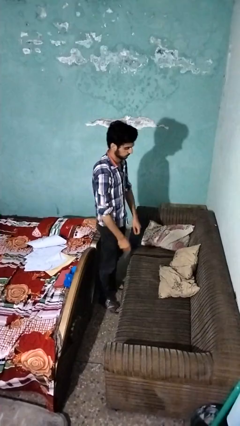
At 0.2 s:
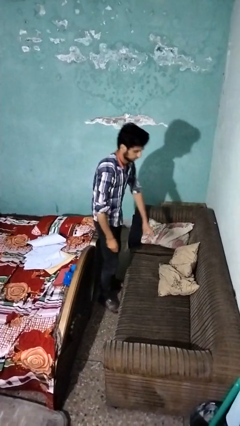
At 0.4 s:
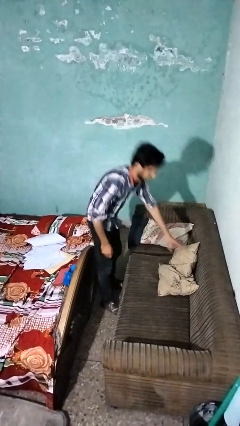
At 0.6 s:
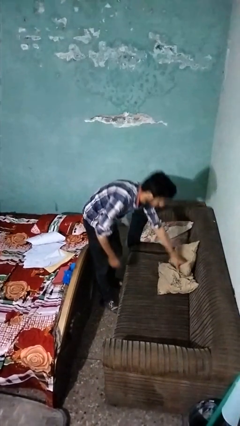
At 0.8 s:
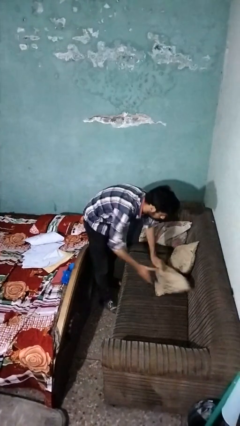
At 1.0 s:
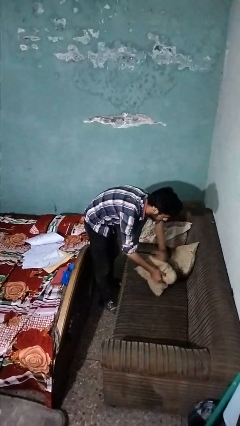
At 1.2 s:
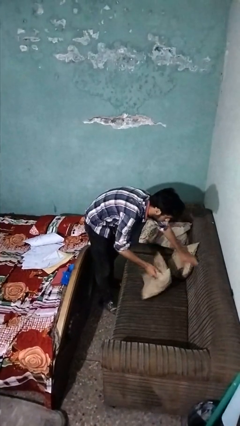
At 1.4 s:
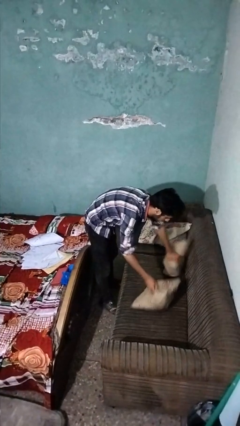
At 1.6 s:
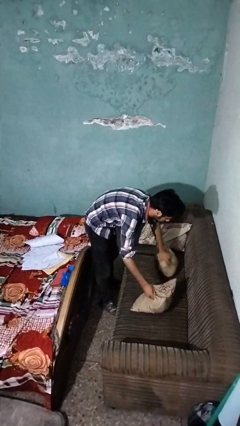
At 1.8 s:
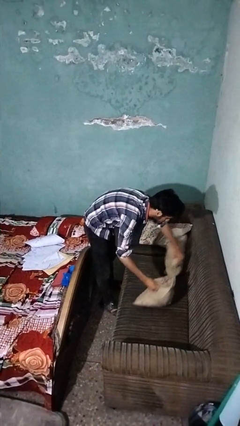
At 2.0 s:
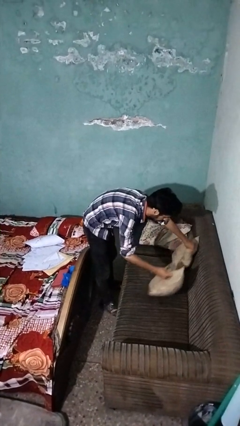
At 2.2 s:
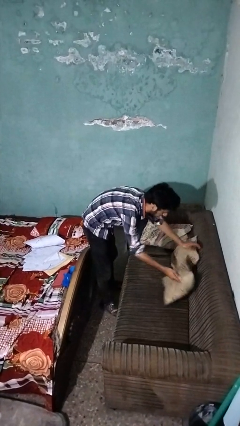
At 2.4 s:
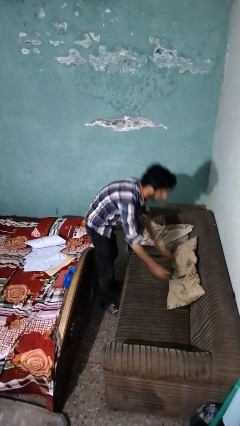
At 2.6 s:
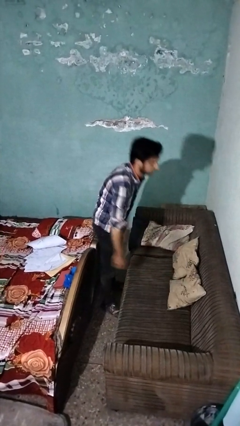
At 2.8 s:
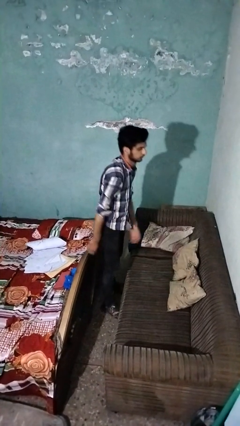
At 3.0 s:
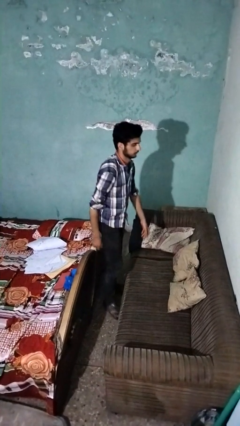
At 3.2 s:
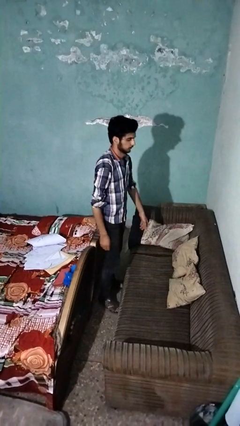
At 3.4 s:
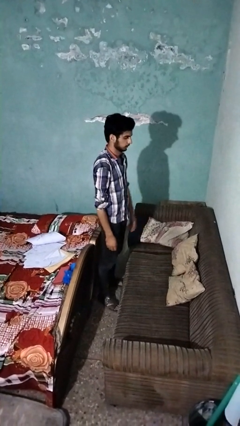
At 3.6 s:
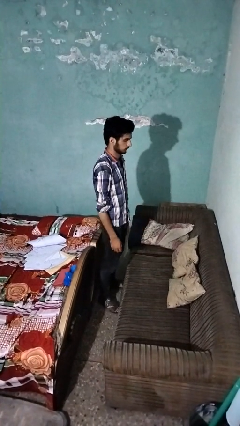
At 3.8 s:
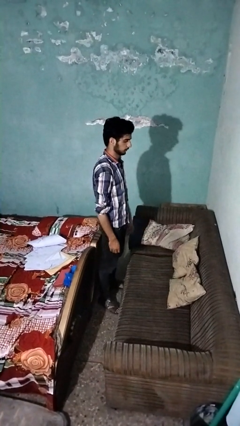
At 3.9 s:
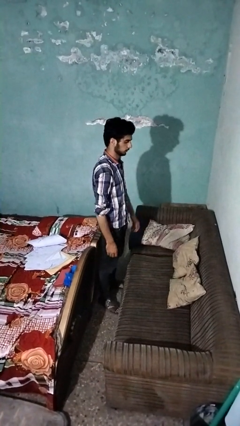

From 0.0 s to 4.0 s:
person searches in couch

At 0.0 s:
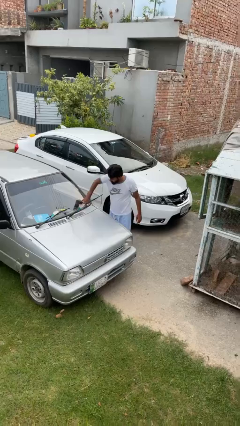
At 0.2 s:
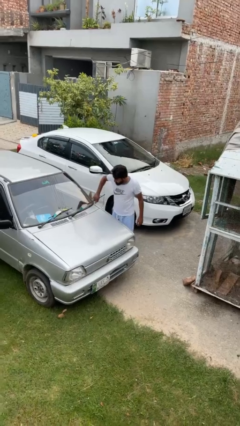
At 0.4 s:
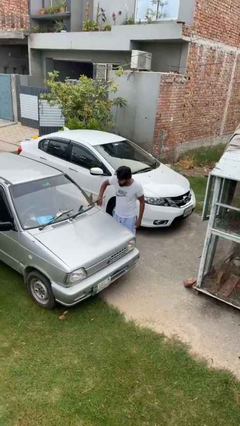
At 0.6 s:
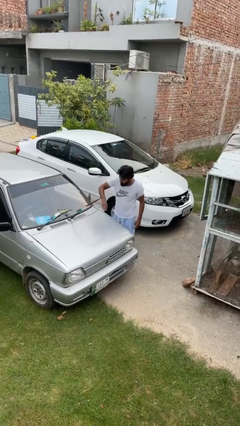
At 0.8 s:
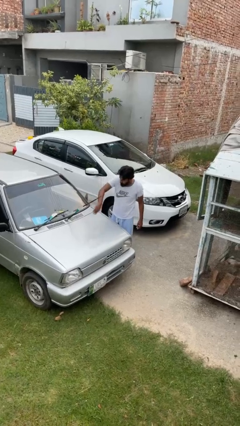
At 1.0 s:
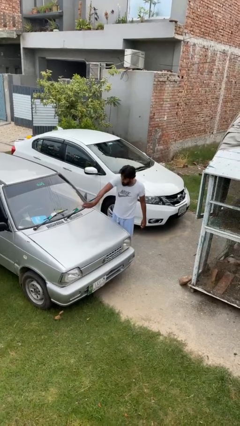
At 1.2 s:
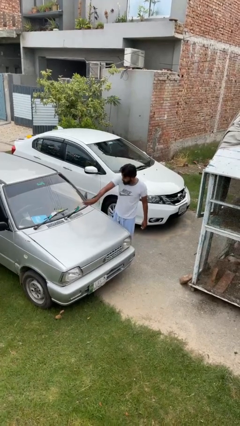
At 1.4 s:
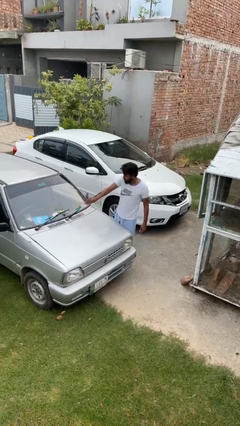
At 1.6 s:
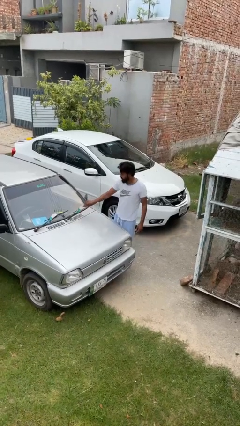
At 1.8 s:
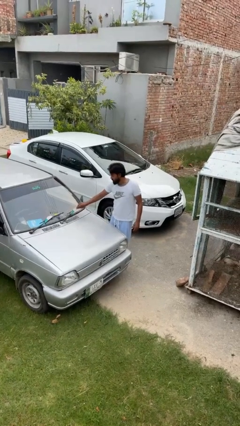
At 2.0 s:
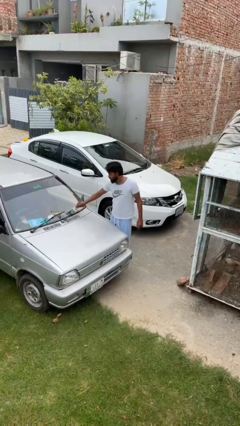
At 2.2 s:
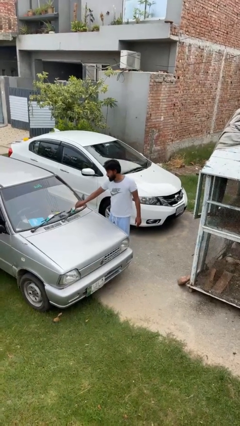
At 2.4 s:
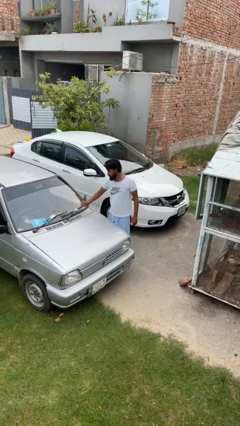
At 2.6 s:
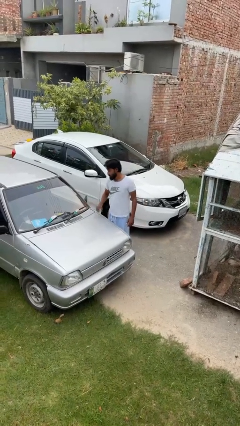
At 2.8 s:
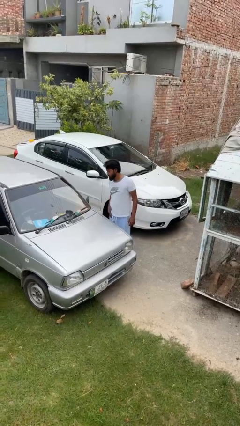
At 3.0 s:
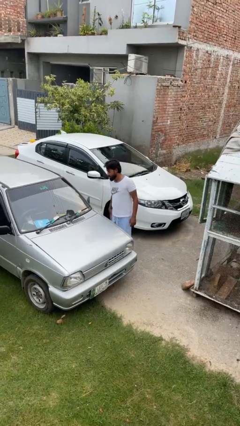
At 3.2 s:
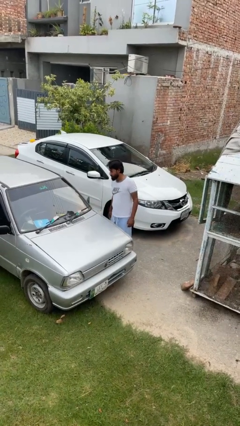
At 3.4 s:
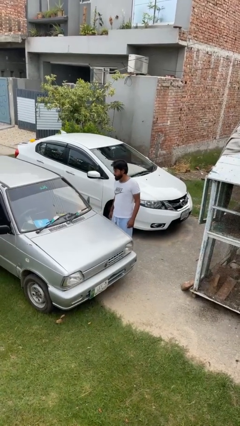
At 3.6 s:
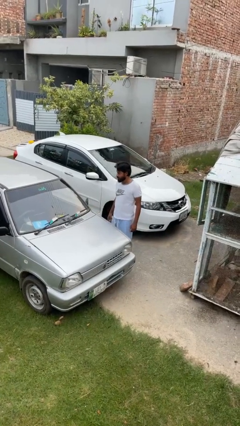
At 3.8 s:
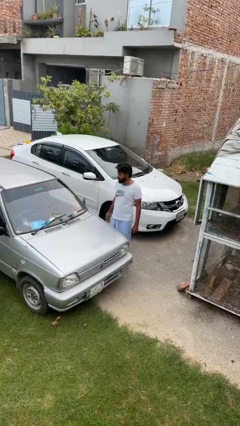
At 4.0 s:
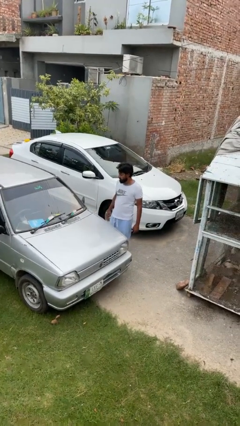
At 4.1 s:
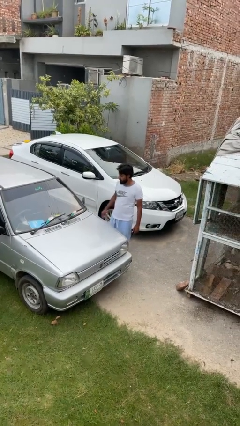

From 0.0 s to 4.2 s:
person flips down car wipers

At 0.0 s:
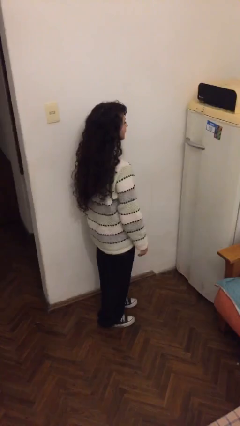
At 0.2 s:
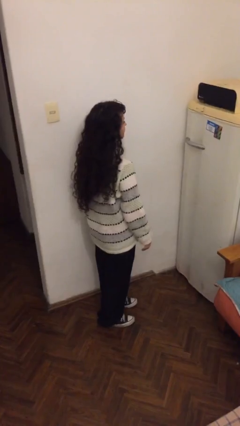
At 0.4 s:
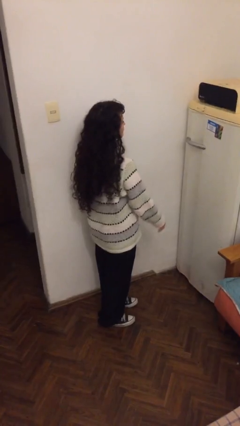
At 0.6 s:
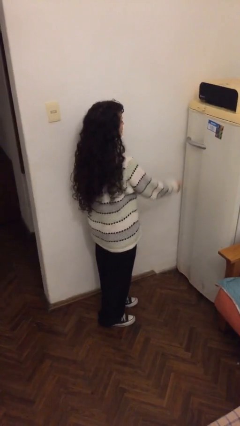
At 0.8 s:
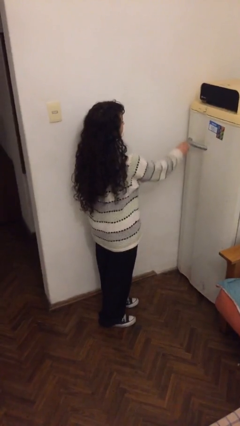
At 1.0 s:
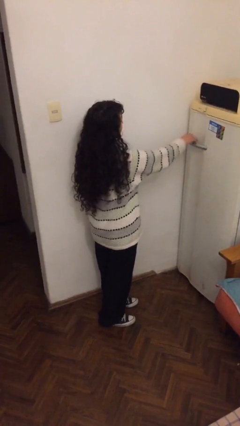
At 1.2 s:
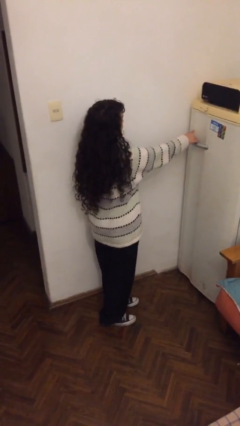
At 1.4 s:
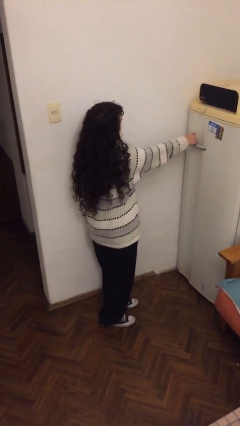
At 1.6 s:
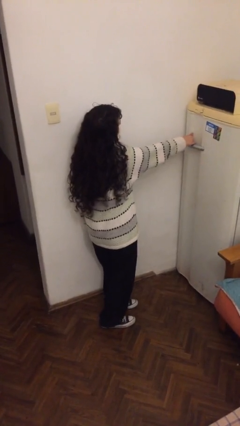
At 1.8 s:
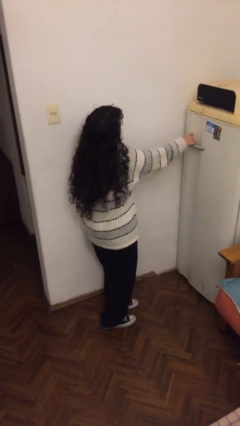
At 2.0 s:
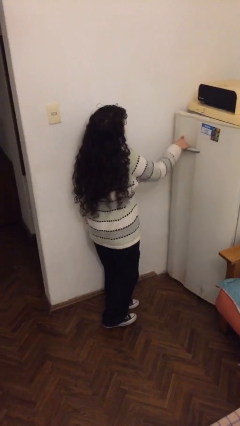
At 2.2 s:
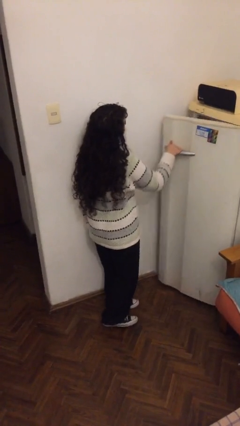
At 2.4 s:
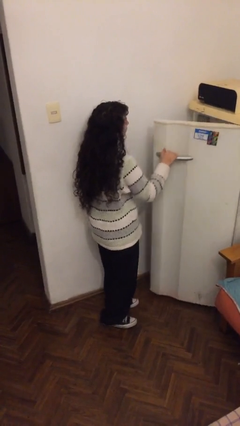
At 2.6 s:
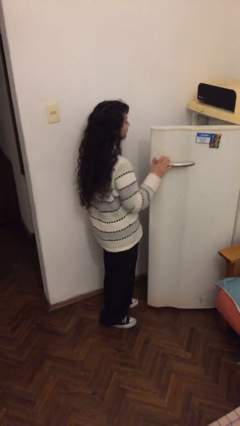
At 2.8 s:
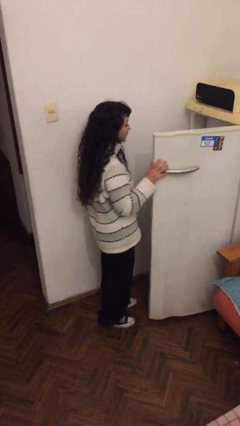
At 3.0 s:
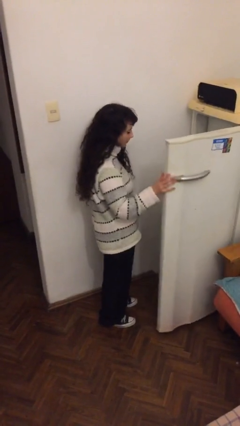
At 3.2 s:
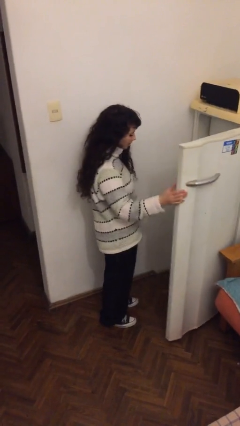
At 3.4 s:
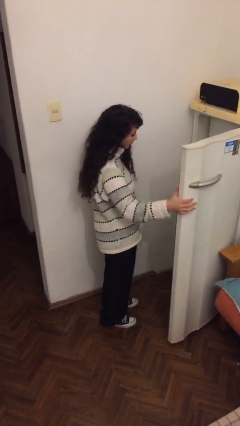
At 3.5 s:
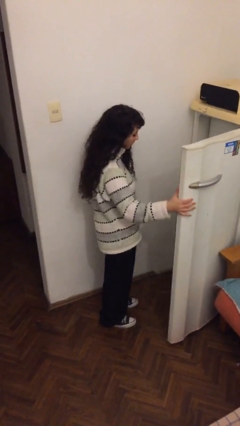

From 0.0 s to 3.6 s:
person opens refrigerator

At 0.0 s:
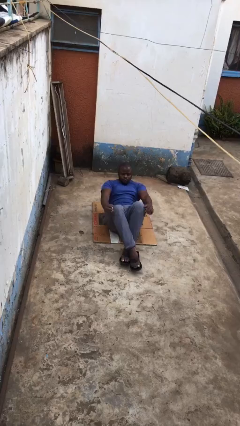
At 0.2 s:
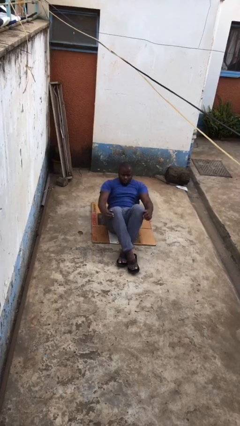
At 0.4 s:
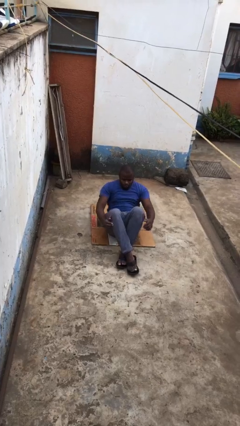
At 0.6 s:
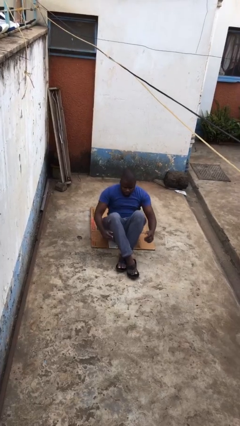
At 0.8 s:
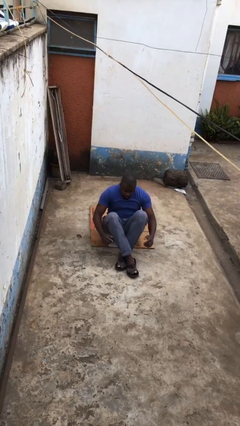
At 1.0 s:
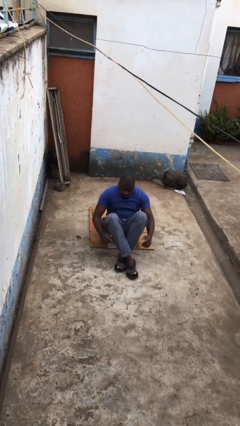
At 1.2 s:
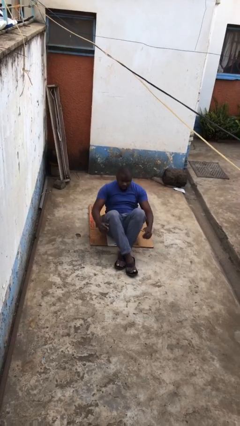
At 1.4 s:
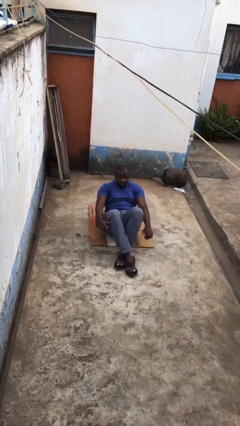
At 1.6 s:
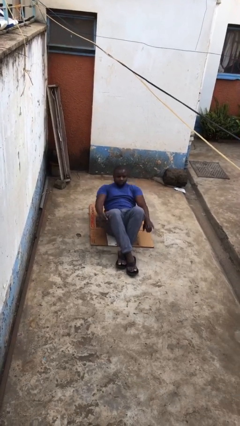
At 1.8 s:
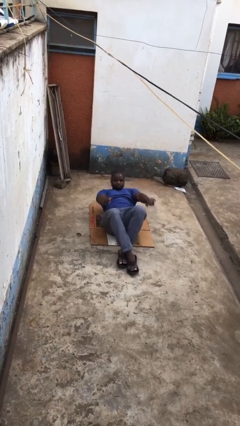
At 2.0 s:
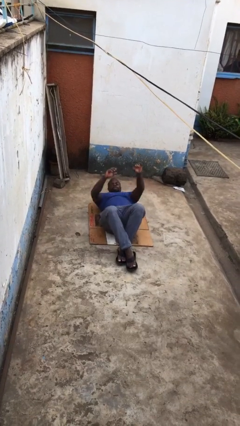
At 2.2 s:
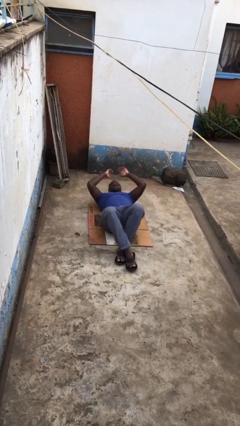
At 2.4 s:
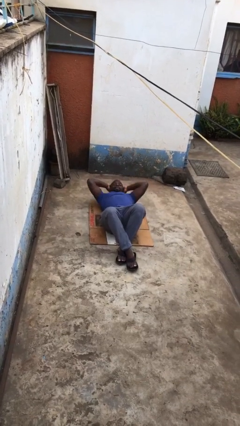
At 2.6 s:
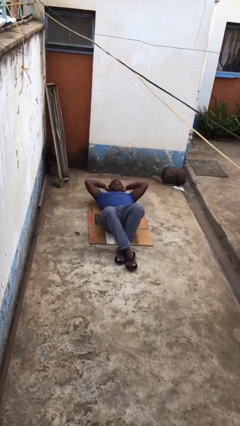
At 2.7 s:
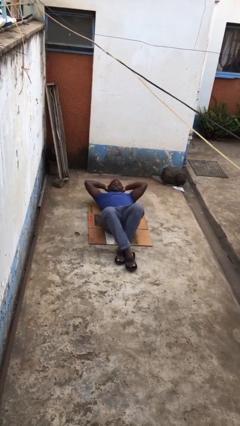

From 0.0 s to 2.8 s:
person exercises with situp

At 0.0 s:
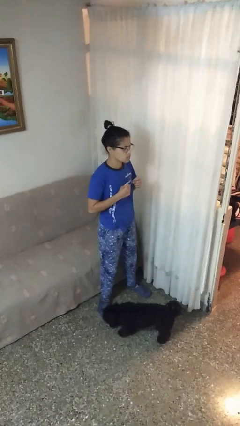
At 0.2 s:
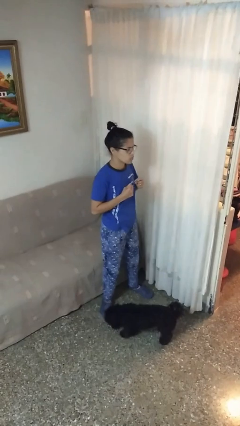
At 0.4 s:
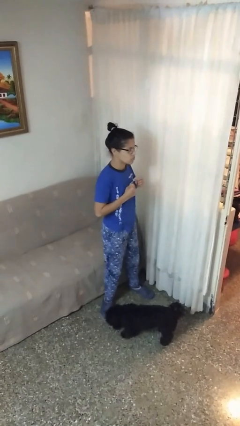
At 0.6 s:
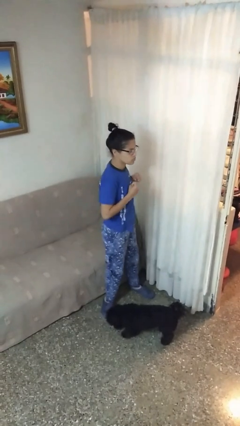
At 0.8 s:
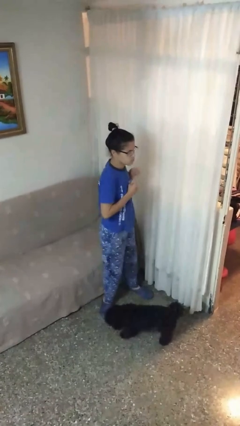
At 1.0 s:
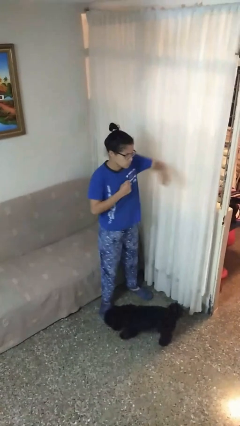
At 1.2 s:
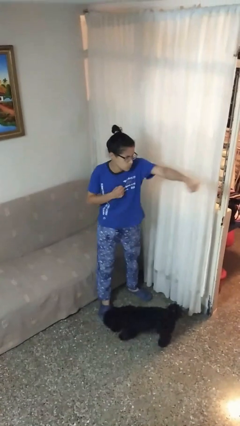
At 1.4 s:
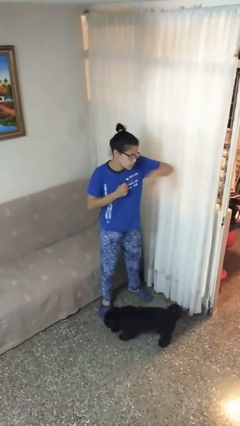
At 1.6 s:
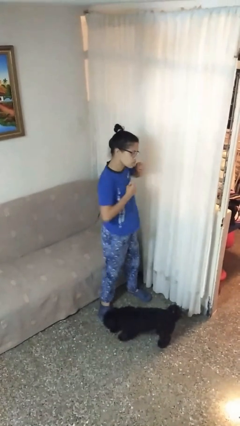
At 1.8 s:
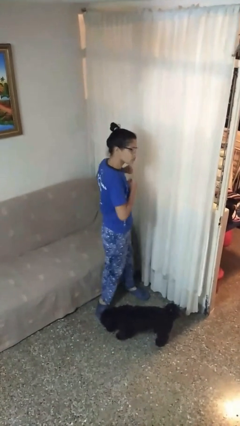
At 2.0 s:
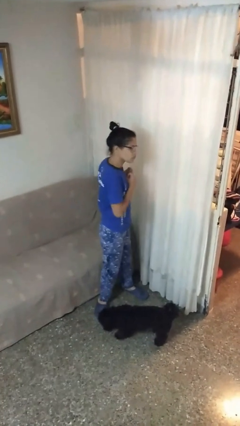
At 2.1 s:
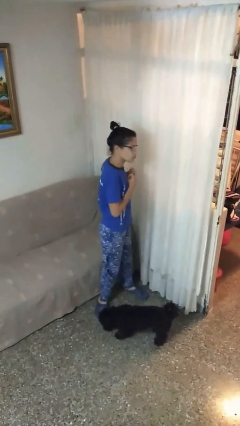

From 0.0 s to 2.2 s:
person punches

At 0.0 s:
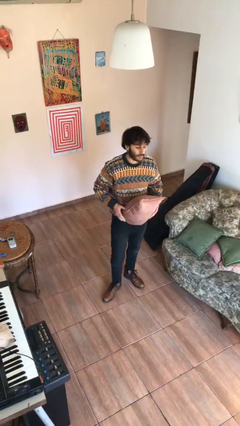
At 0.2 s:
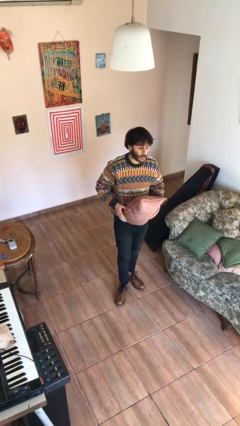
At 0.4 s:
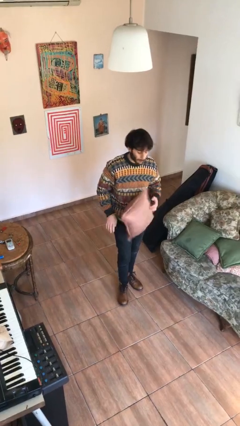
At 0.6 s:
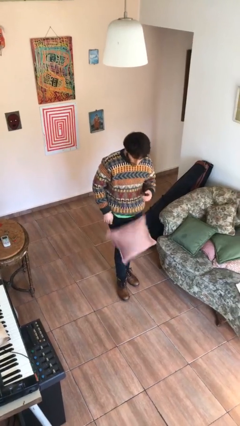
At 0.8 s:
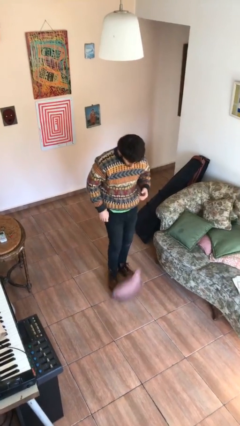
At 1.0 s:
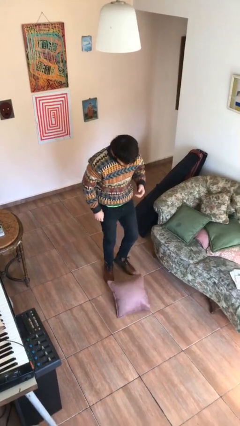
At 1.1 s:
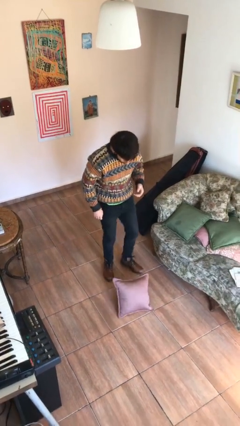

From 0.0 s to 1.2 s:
person drops object
